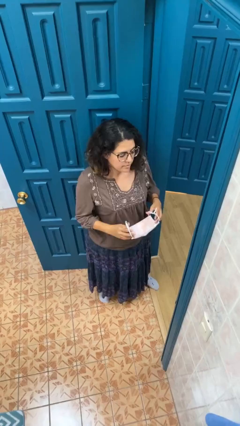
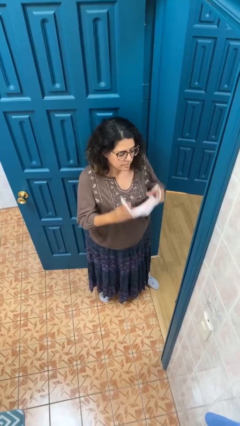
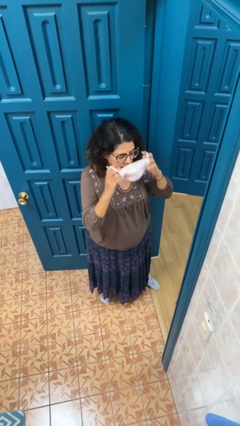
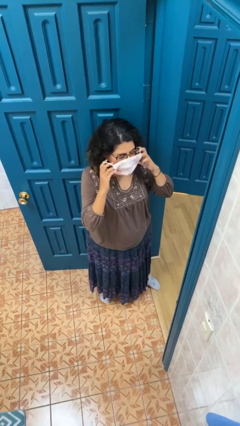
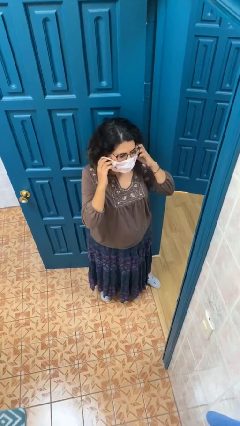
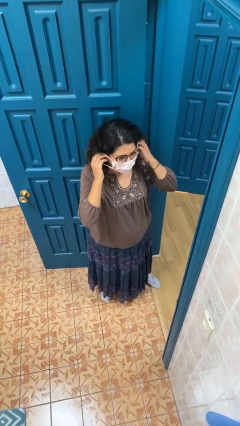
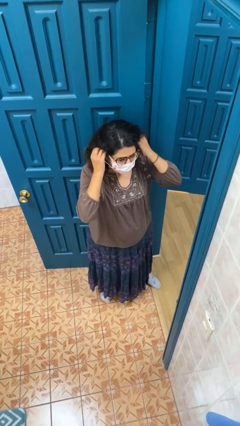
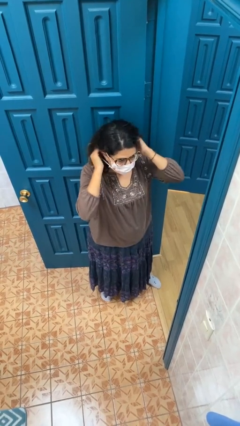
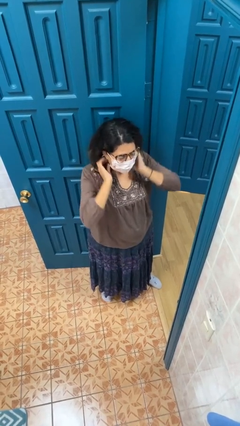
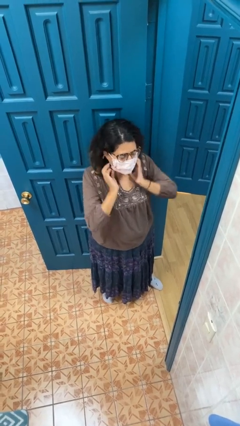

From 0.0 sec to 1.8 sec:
person puts on facemask

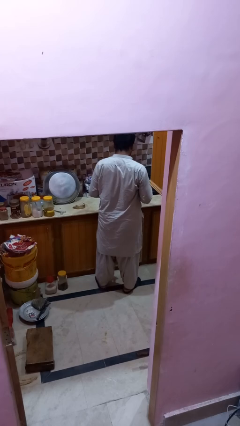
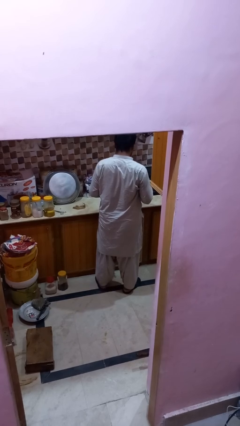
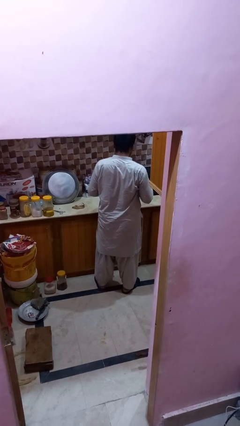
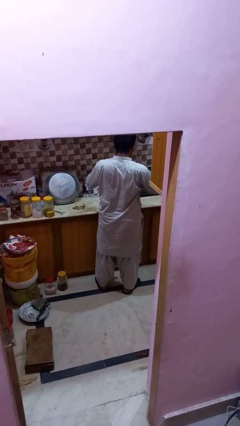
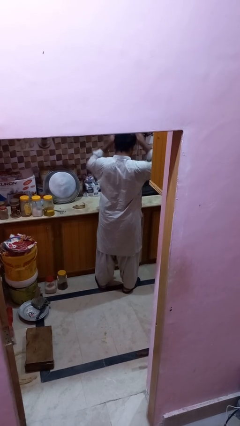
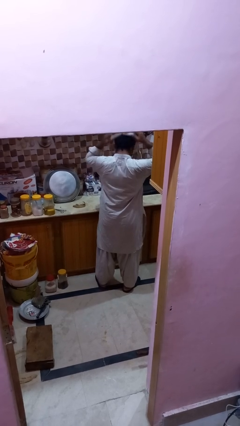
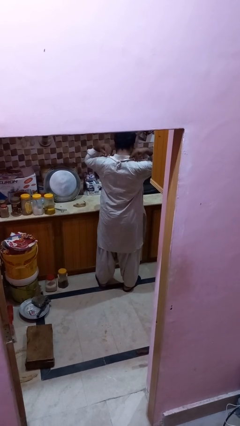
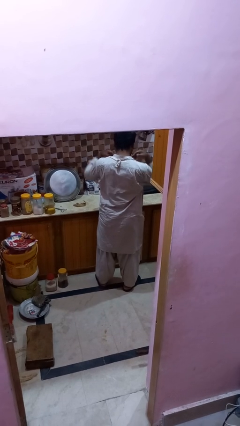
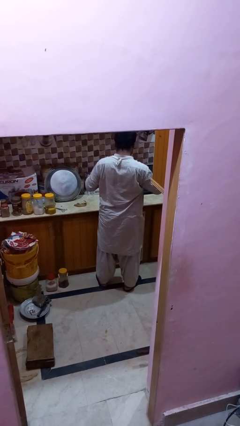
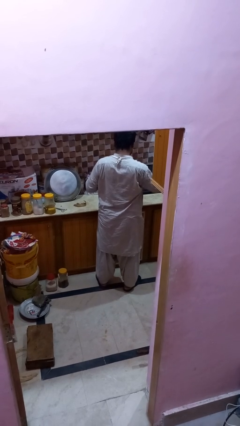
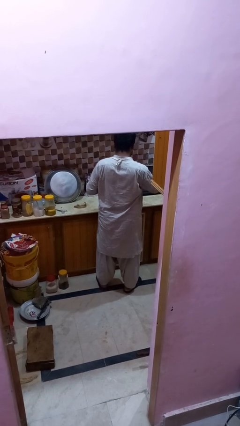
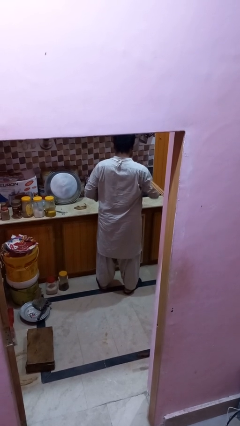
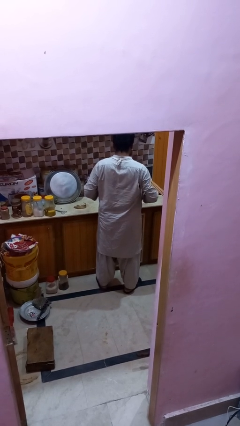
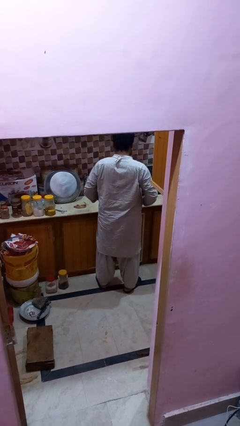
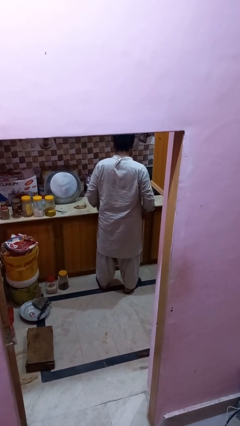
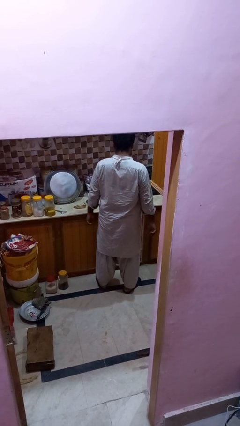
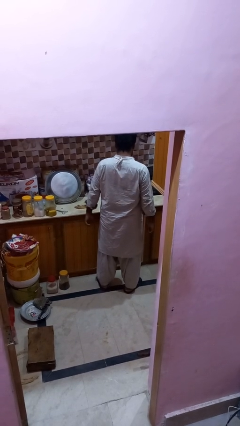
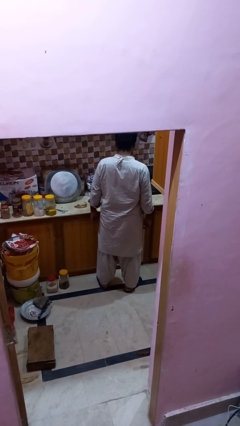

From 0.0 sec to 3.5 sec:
person puts on apron

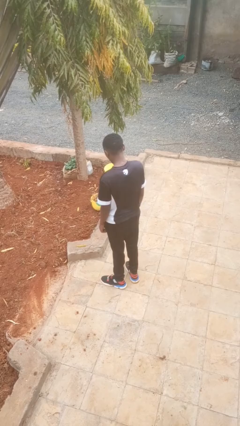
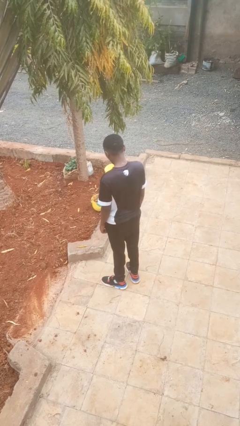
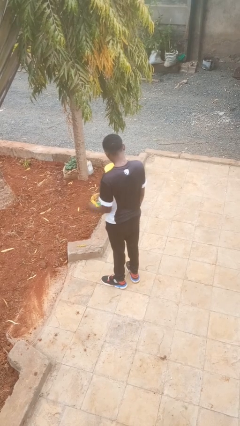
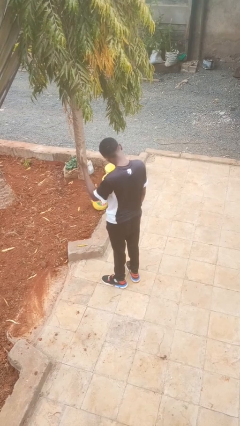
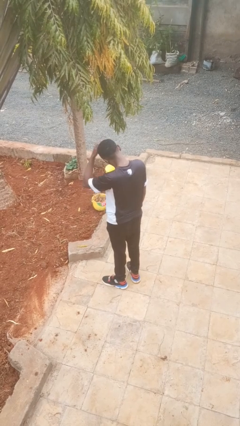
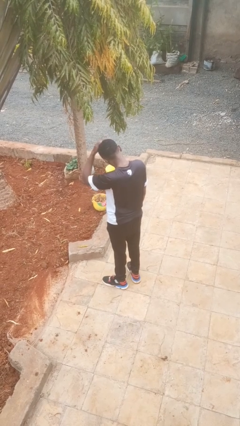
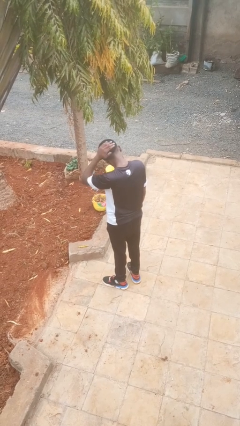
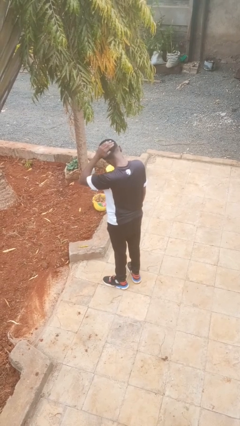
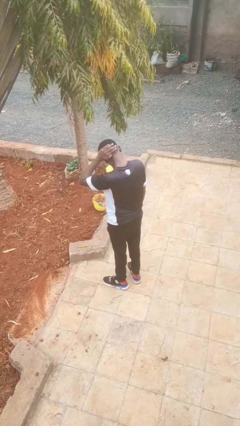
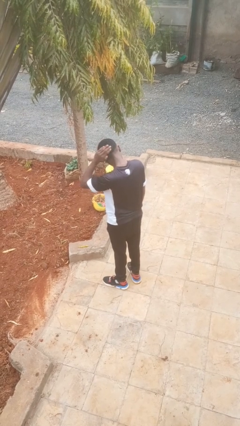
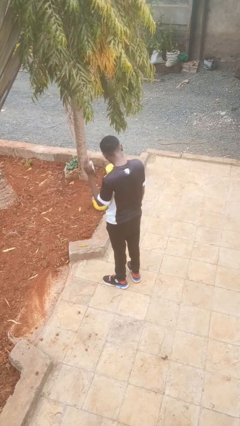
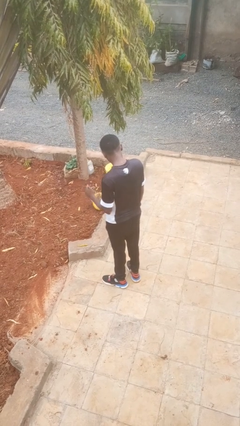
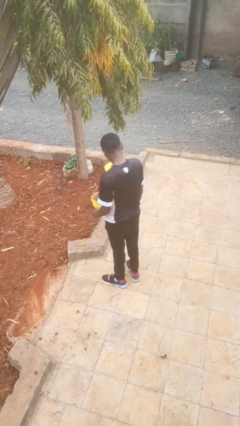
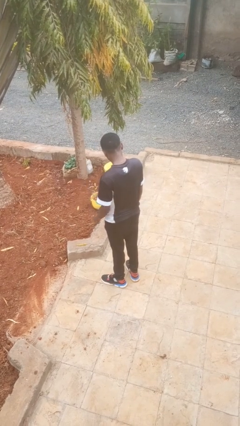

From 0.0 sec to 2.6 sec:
person pats head

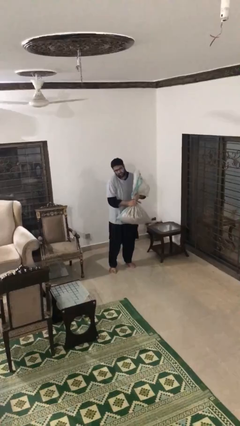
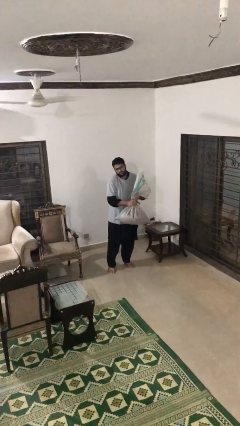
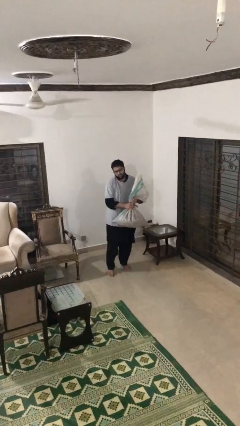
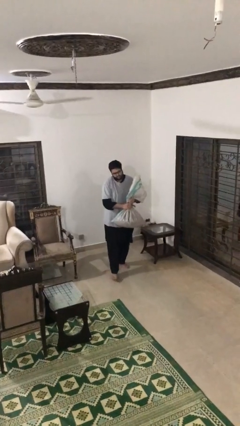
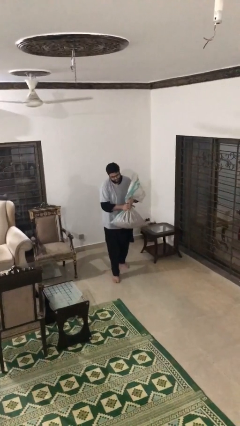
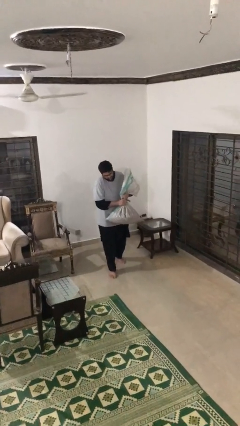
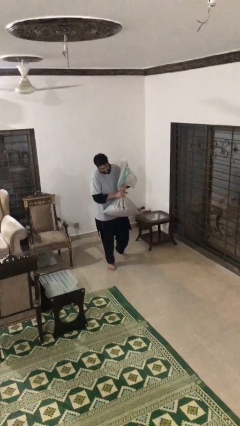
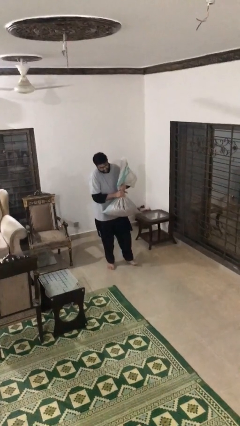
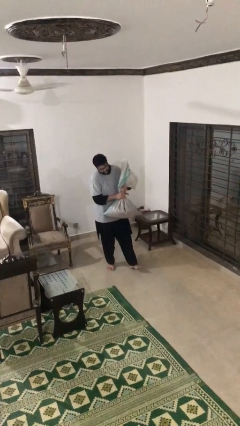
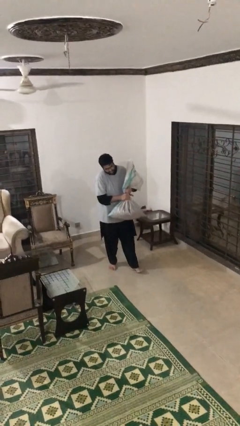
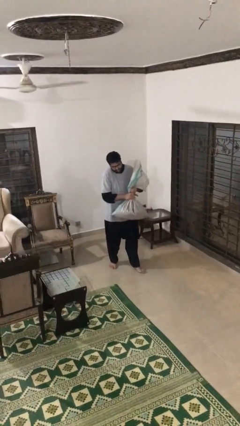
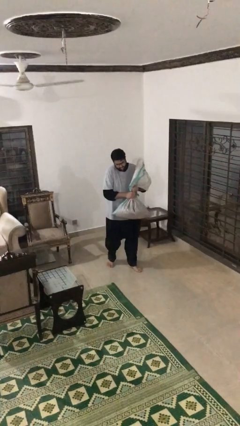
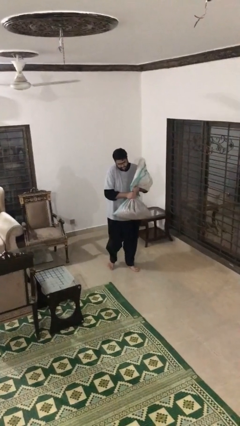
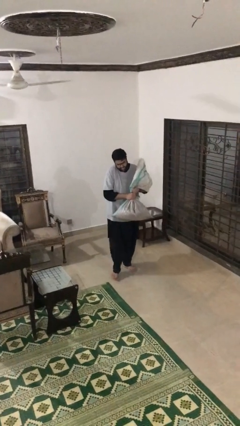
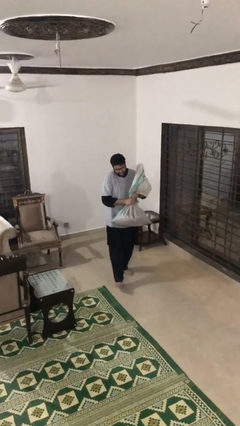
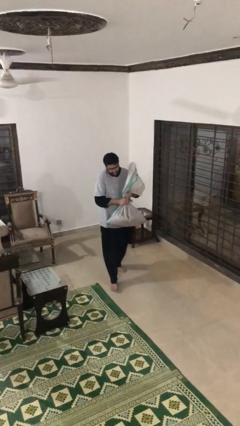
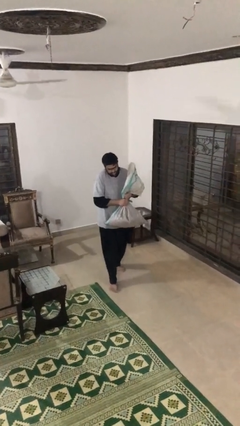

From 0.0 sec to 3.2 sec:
person carries heavy object

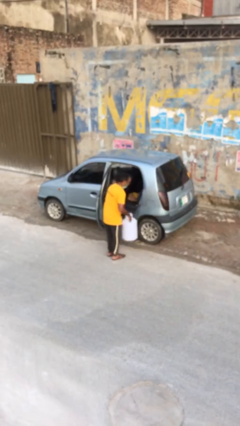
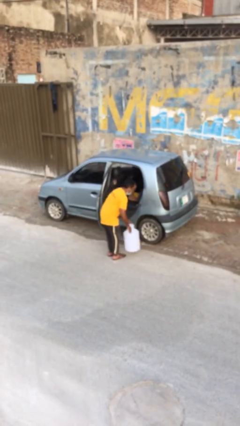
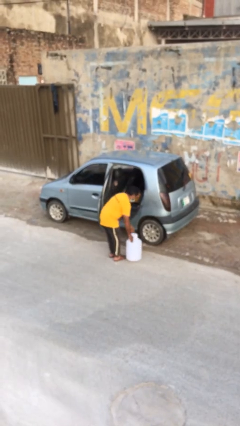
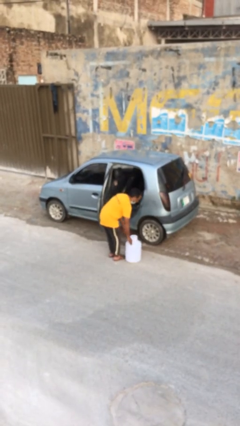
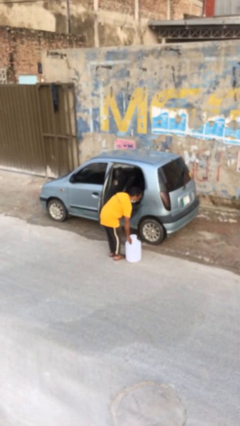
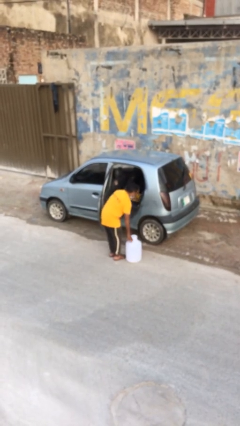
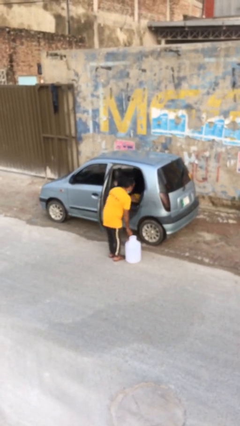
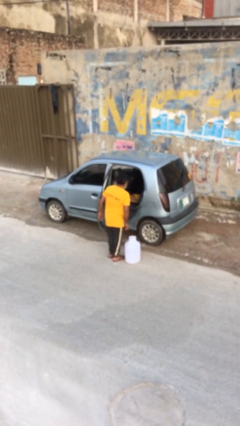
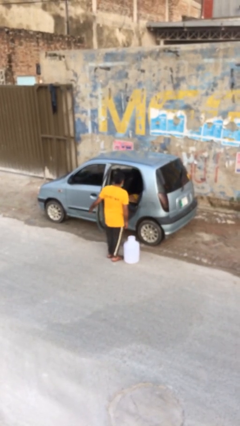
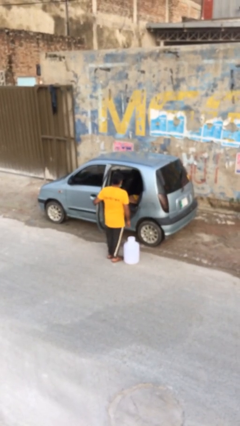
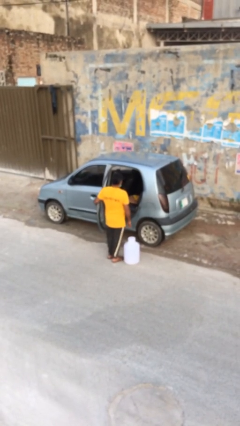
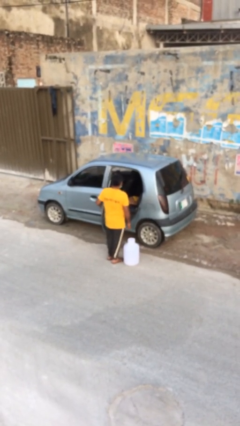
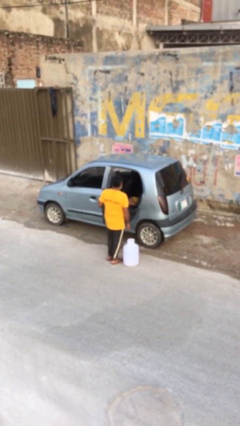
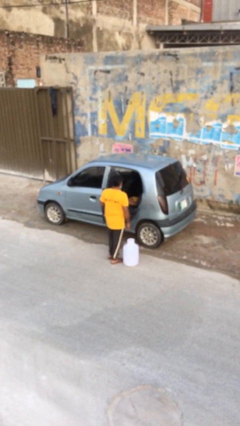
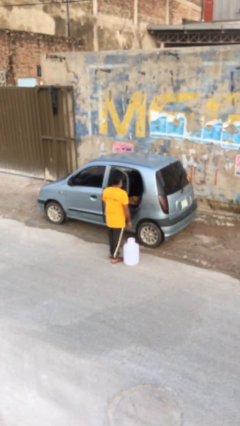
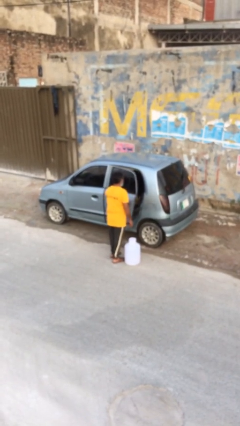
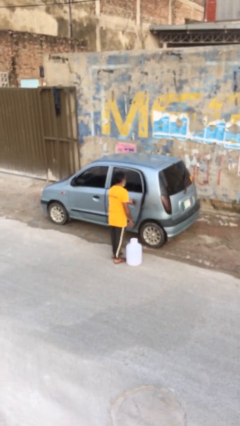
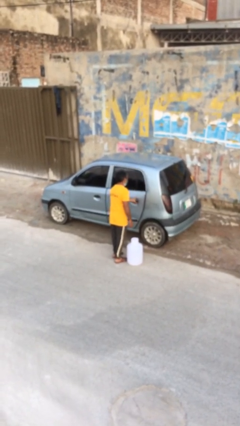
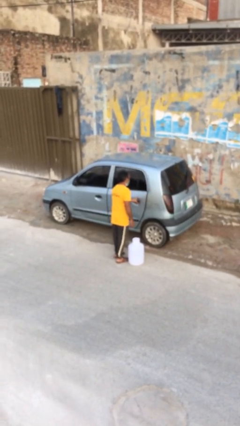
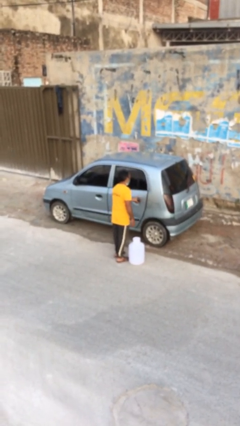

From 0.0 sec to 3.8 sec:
person closes car door

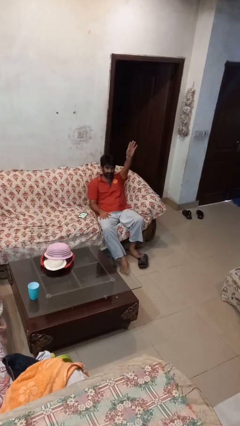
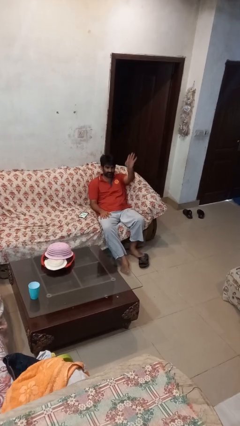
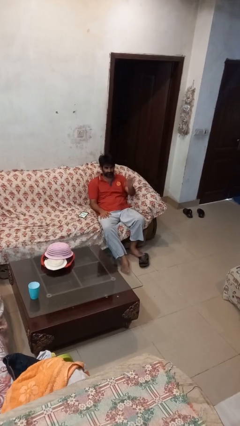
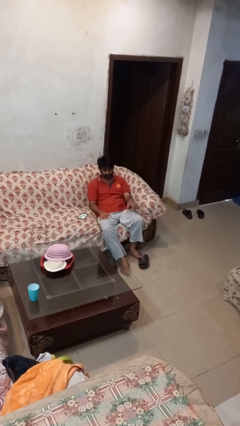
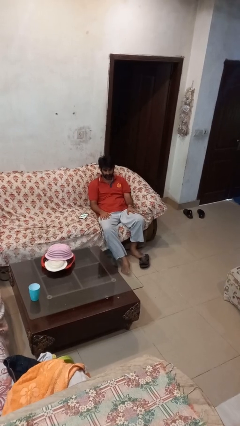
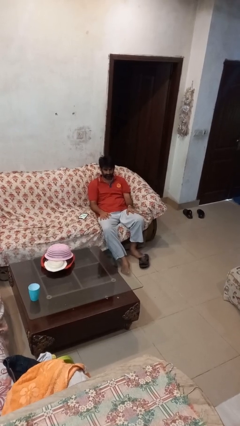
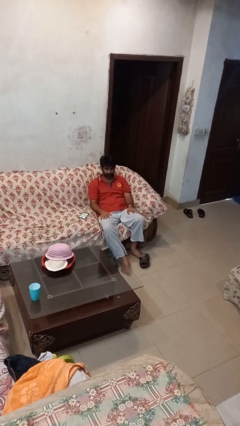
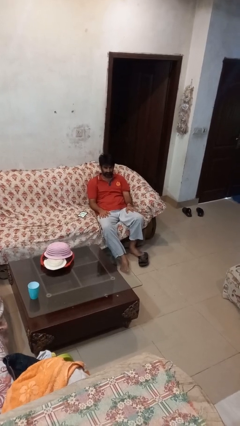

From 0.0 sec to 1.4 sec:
person gestures lower hand

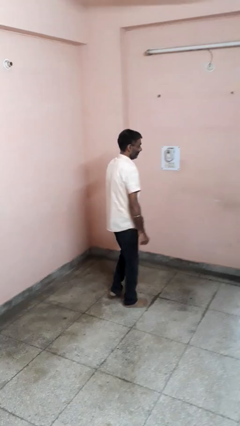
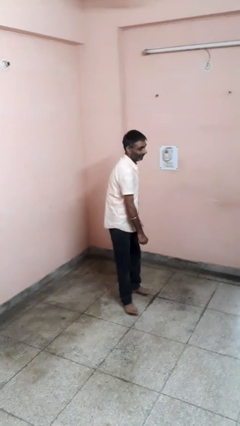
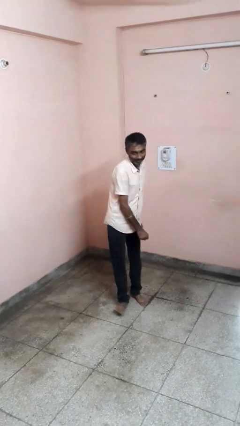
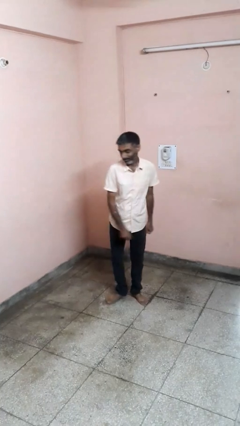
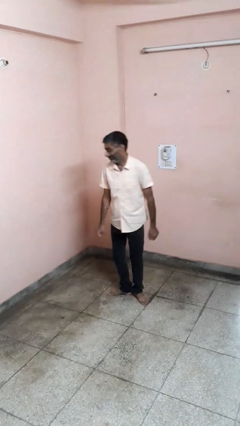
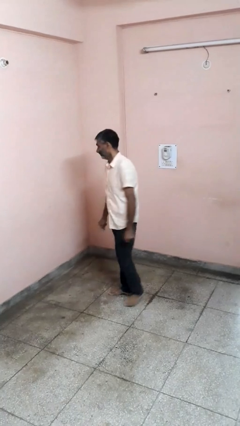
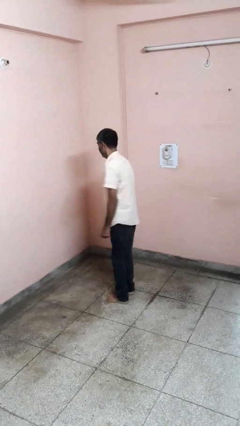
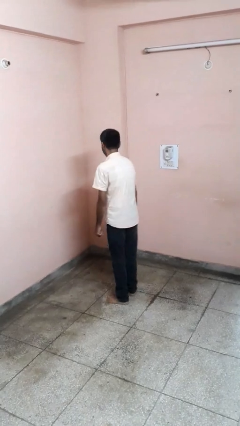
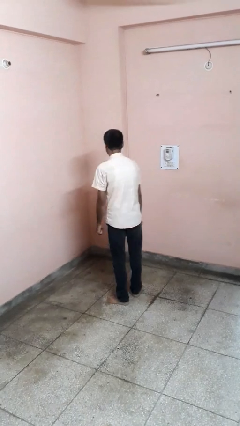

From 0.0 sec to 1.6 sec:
person twirls
